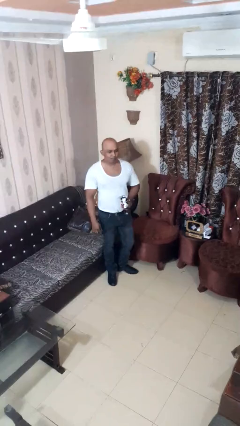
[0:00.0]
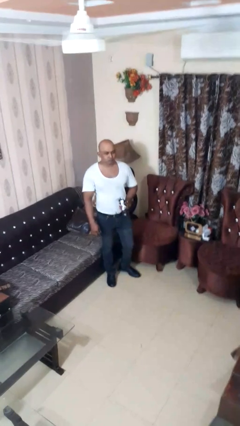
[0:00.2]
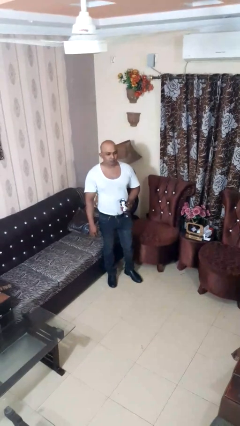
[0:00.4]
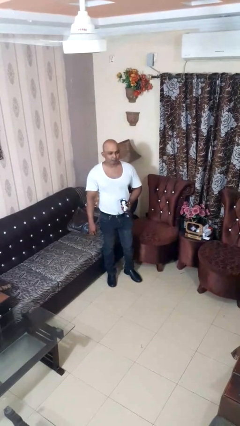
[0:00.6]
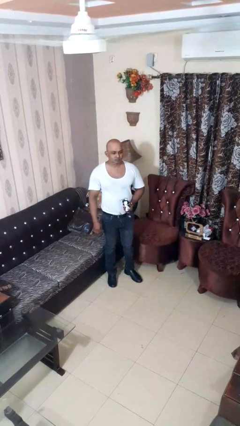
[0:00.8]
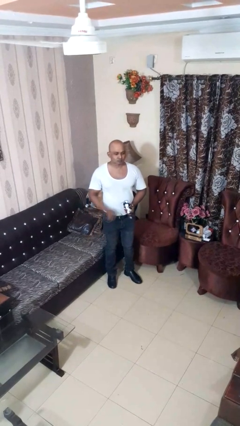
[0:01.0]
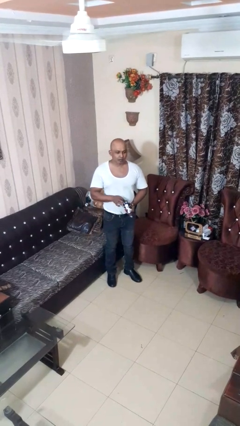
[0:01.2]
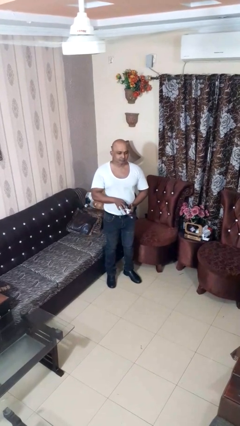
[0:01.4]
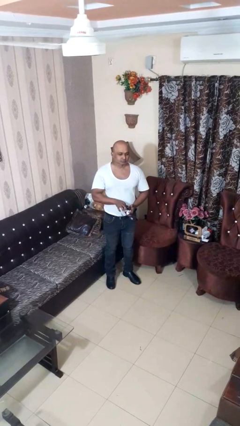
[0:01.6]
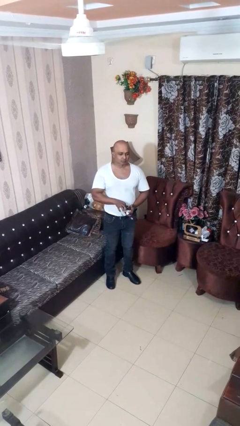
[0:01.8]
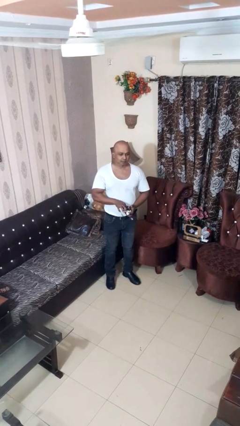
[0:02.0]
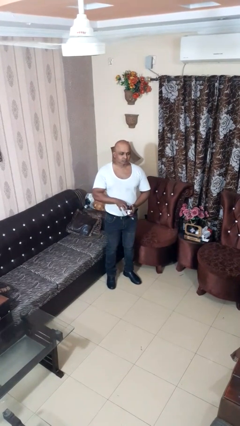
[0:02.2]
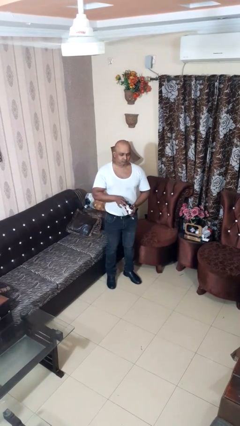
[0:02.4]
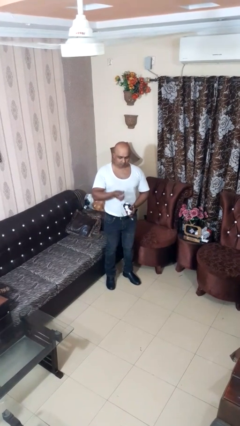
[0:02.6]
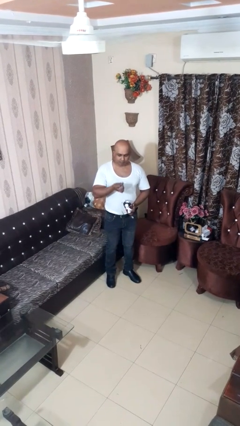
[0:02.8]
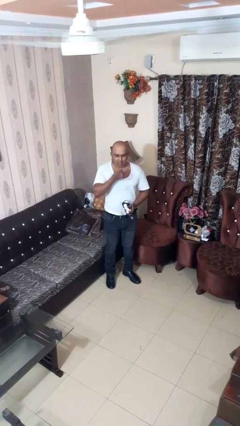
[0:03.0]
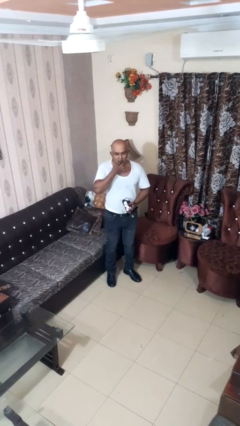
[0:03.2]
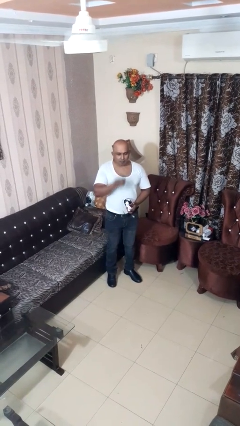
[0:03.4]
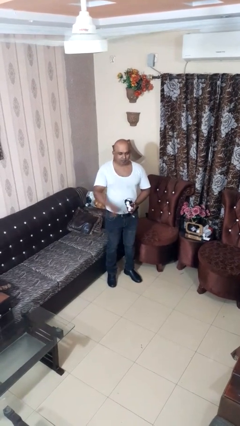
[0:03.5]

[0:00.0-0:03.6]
person eats snack from bag

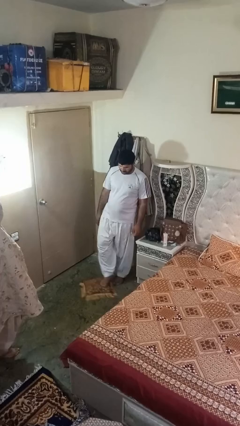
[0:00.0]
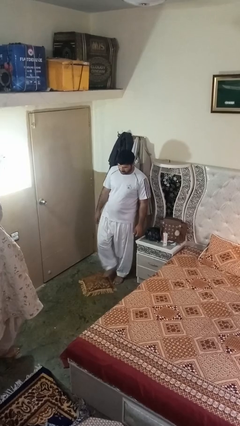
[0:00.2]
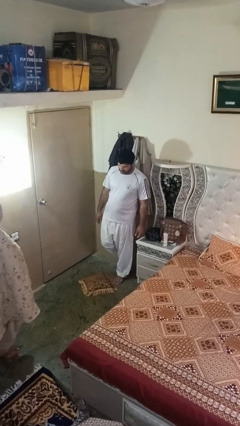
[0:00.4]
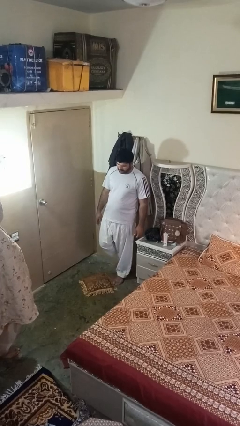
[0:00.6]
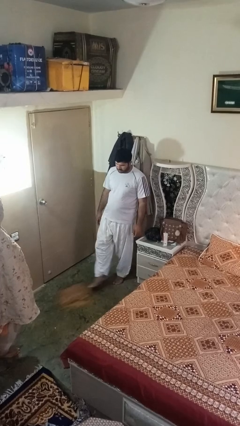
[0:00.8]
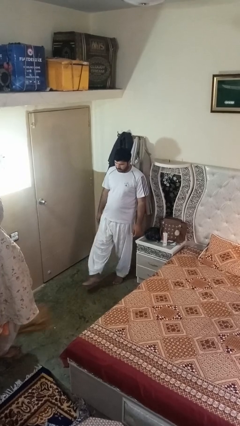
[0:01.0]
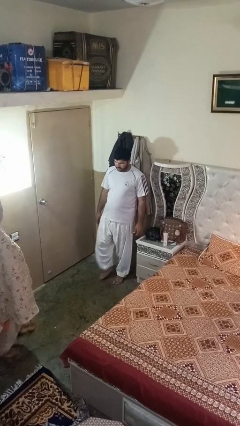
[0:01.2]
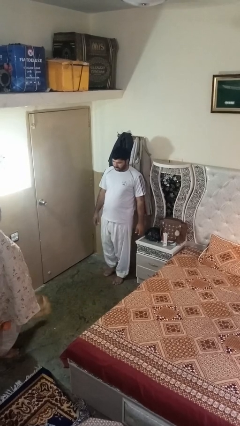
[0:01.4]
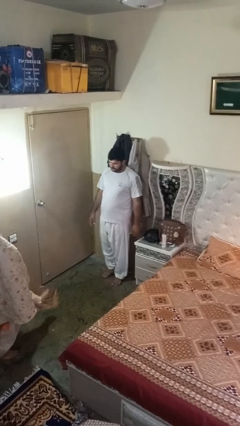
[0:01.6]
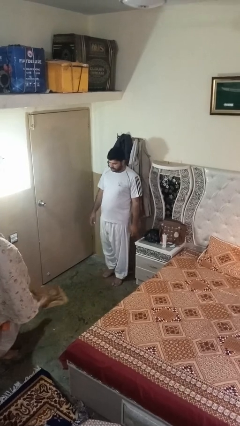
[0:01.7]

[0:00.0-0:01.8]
person kicks object to person

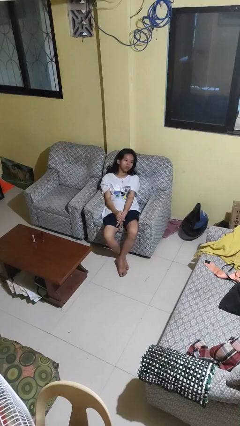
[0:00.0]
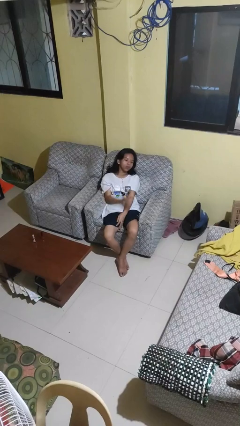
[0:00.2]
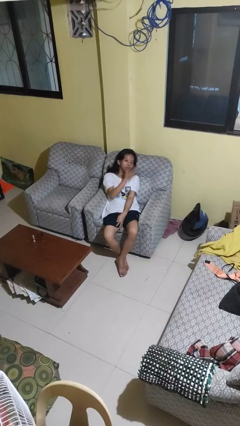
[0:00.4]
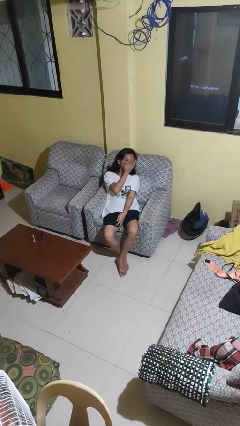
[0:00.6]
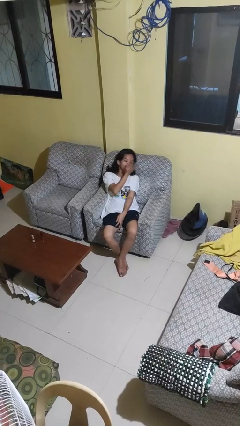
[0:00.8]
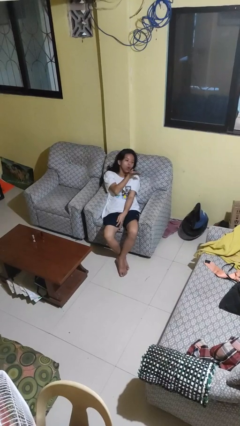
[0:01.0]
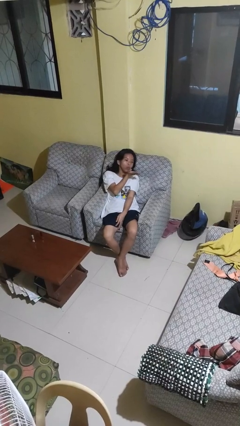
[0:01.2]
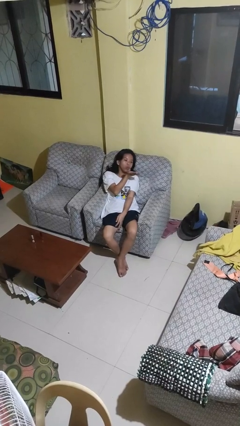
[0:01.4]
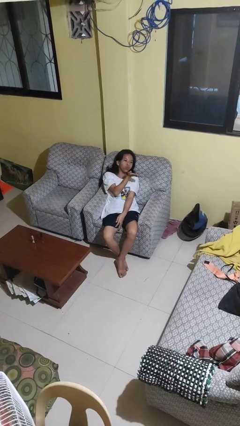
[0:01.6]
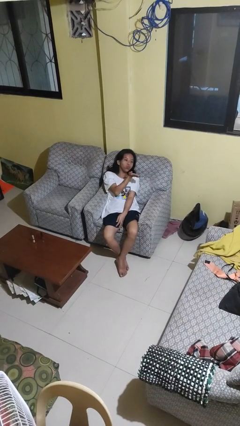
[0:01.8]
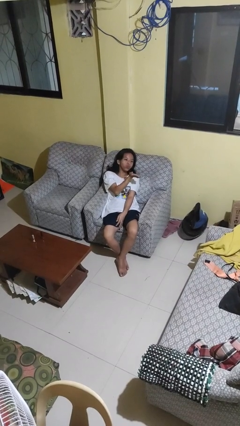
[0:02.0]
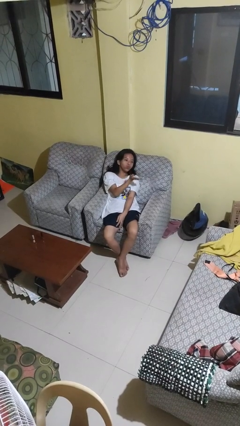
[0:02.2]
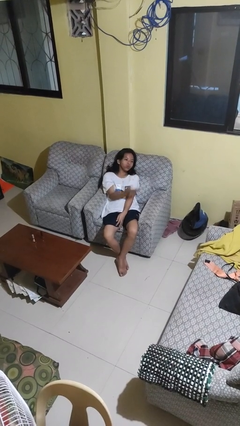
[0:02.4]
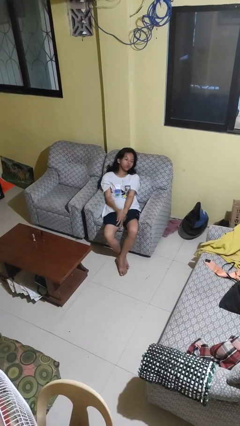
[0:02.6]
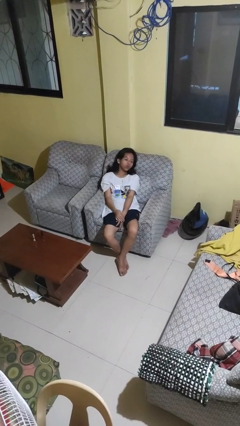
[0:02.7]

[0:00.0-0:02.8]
person gestures blow kiss

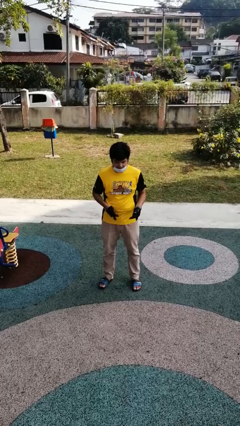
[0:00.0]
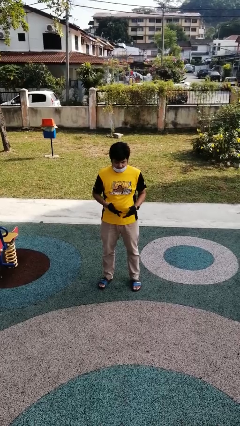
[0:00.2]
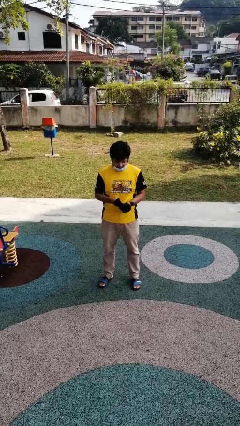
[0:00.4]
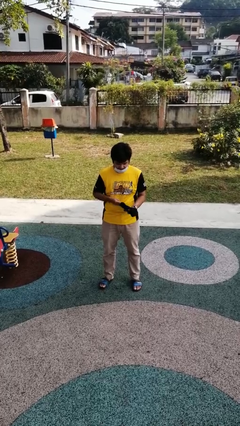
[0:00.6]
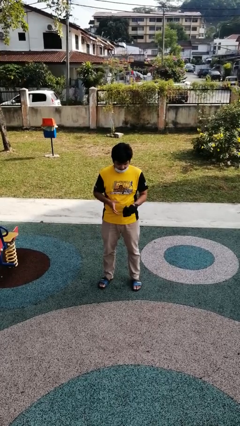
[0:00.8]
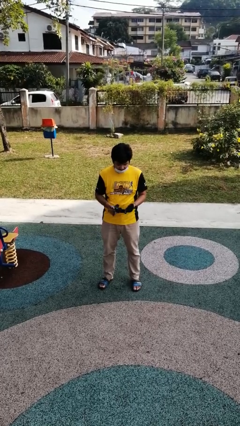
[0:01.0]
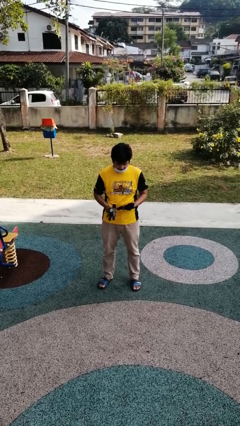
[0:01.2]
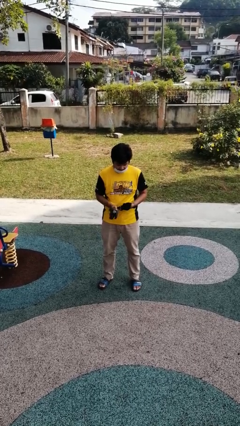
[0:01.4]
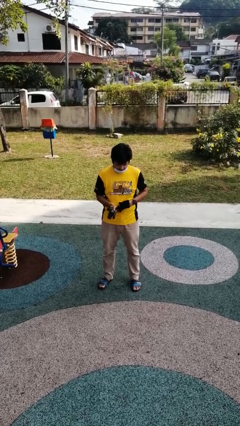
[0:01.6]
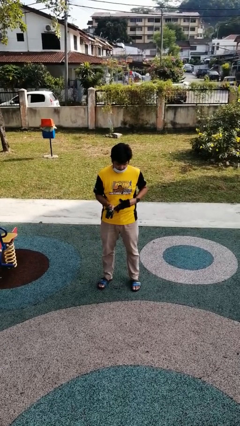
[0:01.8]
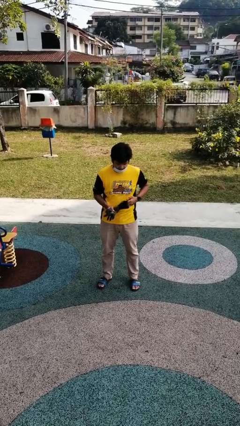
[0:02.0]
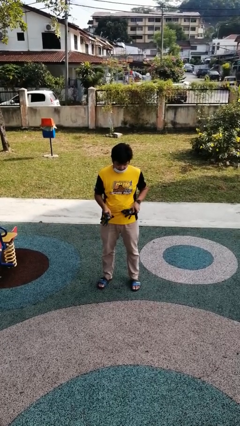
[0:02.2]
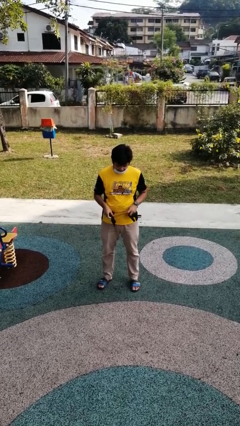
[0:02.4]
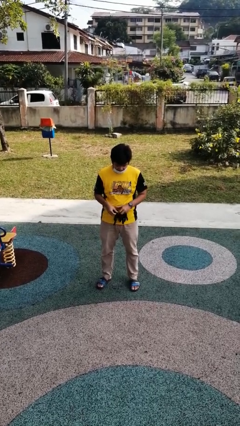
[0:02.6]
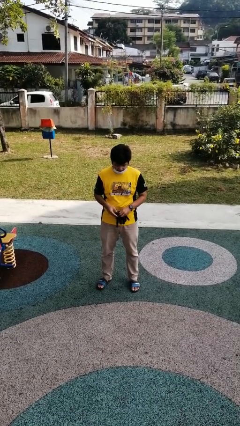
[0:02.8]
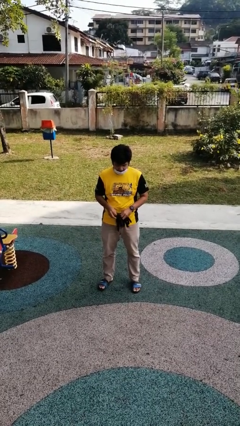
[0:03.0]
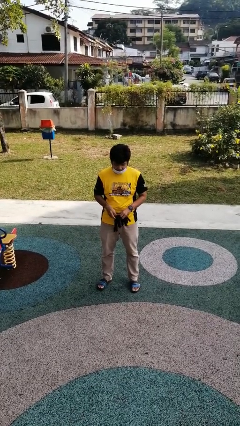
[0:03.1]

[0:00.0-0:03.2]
person takes off gloves

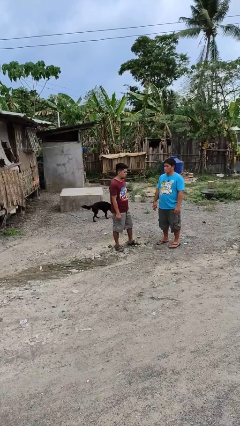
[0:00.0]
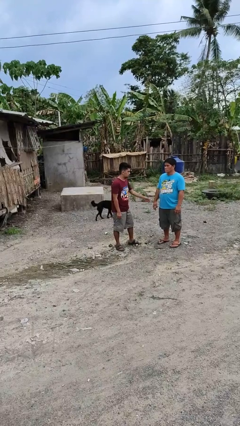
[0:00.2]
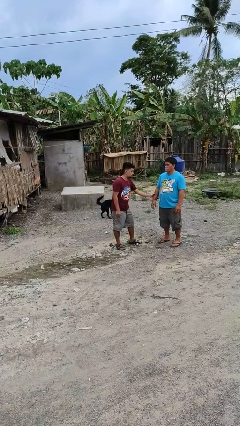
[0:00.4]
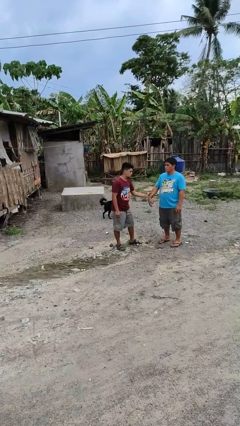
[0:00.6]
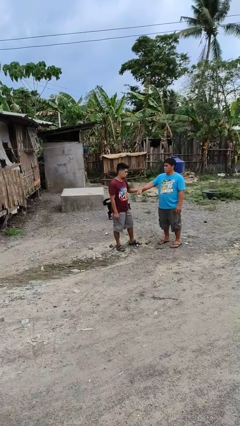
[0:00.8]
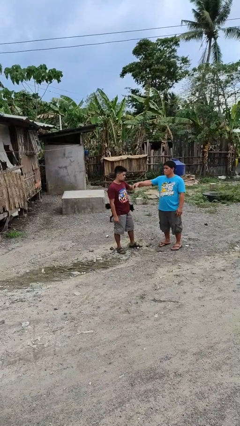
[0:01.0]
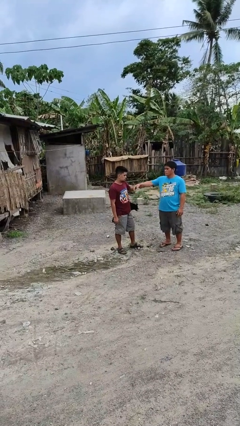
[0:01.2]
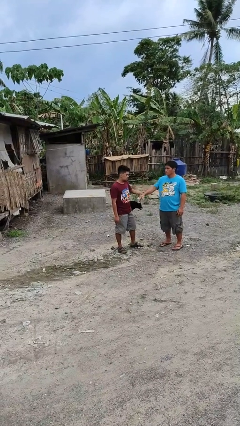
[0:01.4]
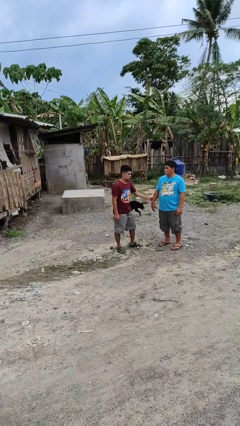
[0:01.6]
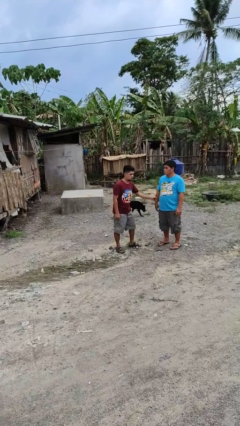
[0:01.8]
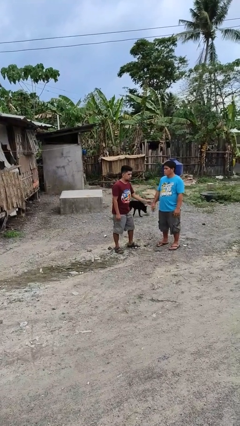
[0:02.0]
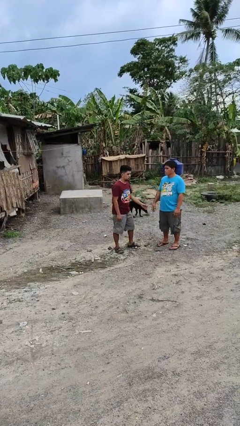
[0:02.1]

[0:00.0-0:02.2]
person grabs person by forearm

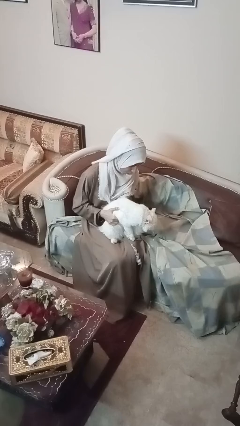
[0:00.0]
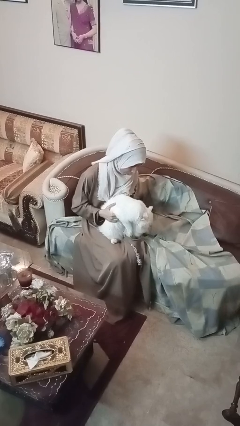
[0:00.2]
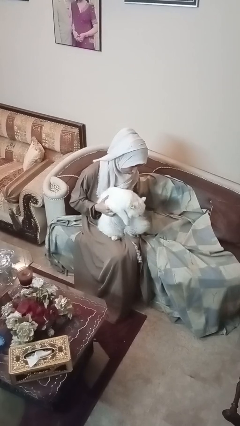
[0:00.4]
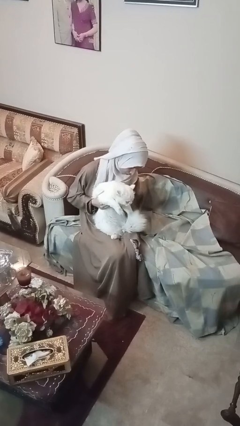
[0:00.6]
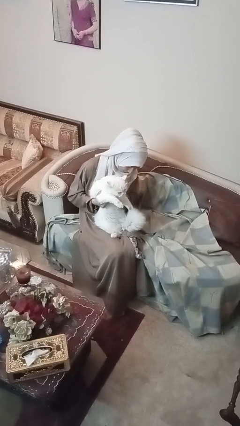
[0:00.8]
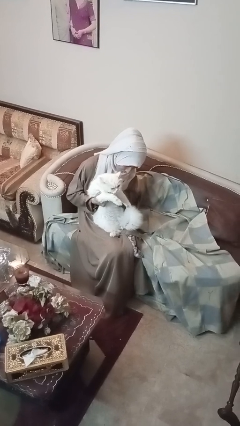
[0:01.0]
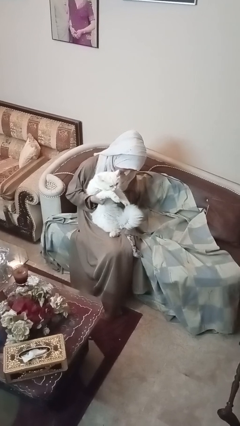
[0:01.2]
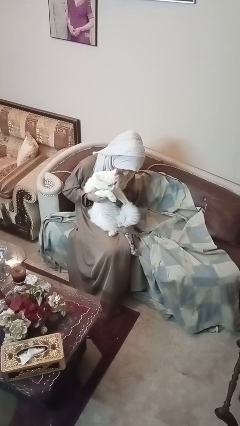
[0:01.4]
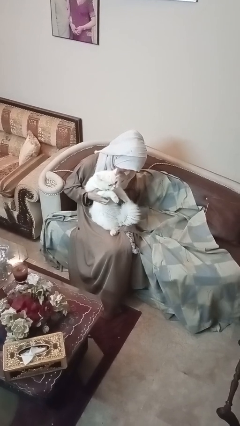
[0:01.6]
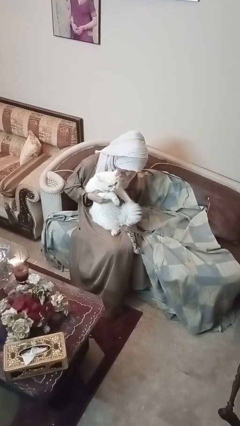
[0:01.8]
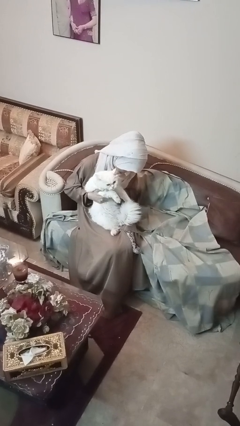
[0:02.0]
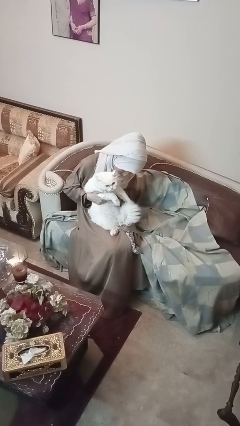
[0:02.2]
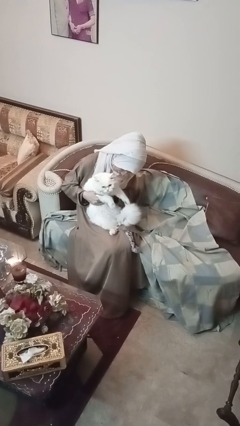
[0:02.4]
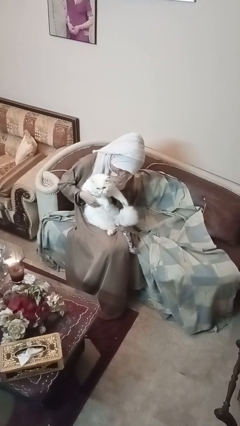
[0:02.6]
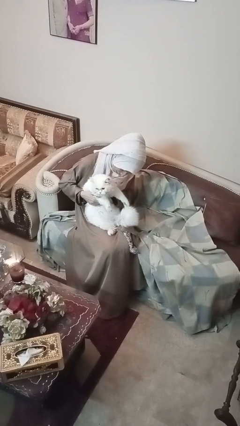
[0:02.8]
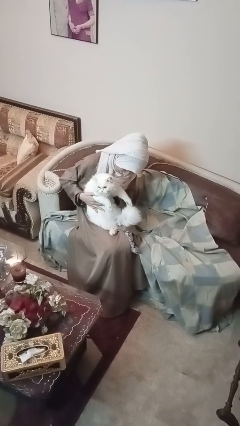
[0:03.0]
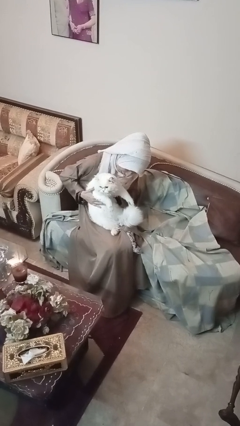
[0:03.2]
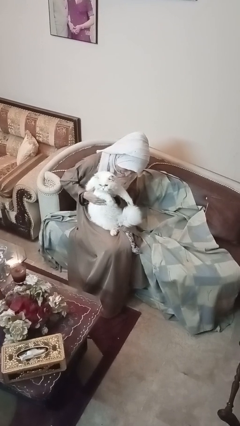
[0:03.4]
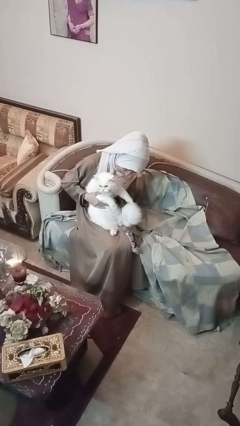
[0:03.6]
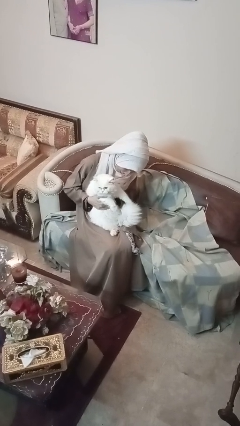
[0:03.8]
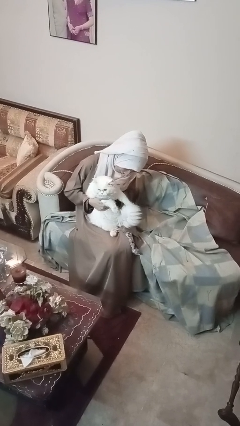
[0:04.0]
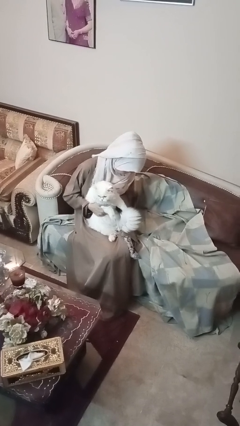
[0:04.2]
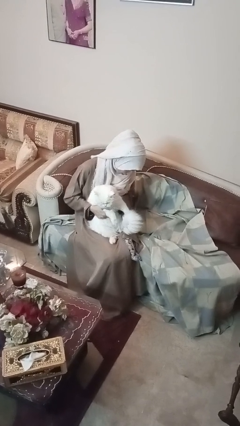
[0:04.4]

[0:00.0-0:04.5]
person hugs cat
